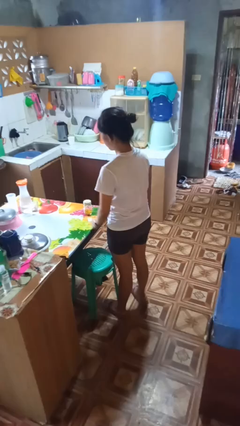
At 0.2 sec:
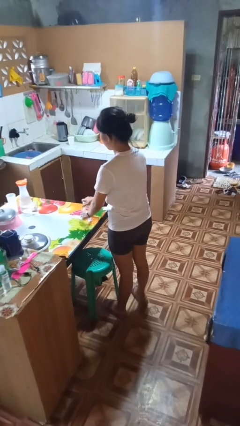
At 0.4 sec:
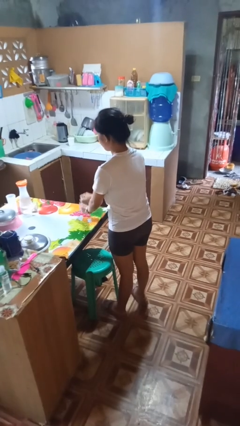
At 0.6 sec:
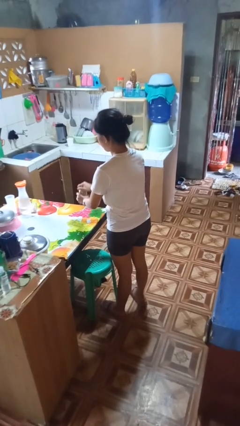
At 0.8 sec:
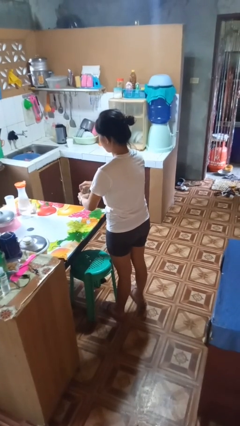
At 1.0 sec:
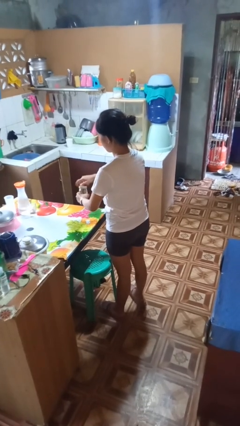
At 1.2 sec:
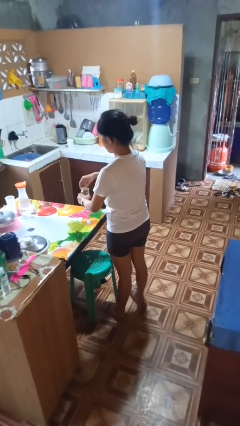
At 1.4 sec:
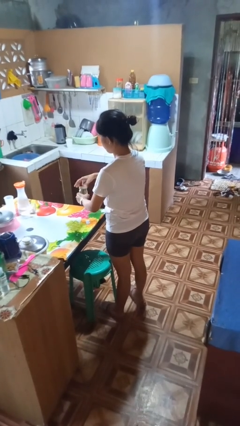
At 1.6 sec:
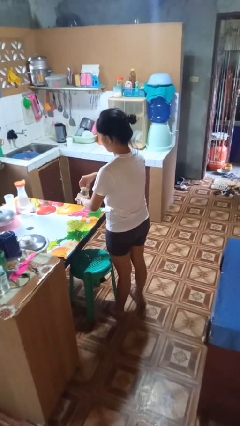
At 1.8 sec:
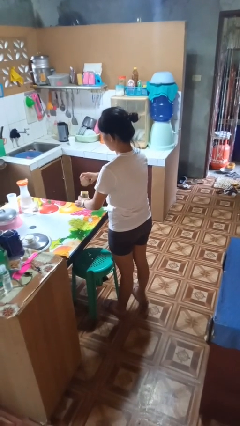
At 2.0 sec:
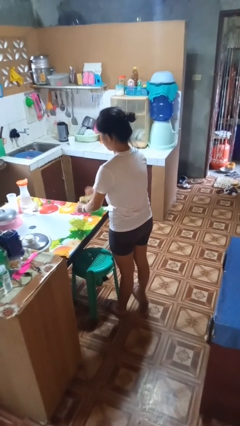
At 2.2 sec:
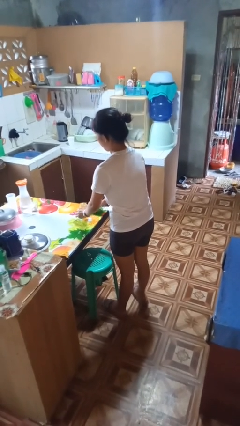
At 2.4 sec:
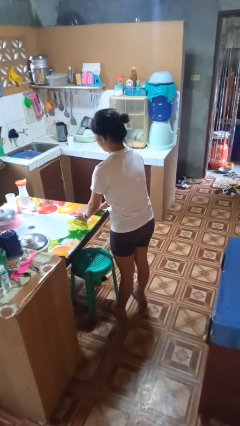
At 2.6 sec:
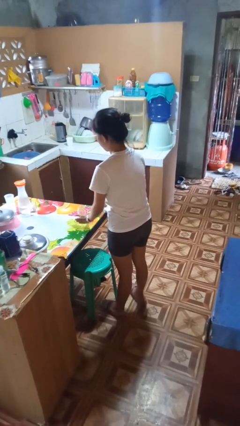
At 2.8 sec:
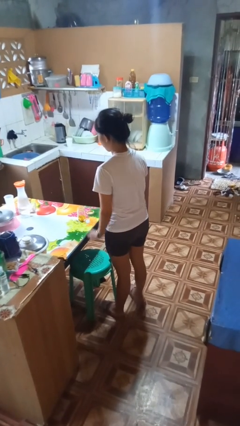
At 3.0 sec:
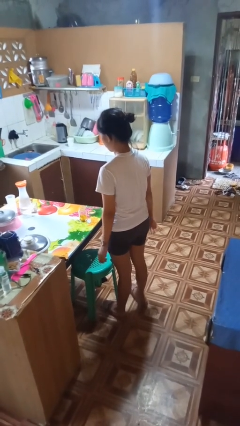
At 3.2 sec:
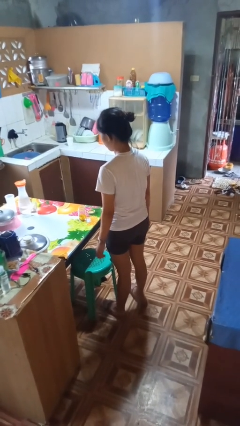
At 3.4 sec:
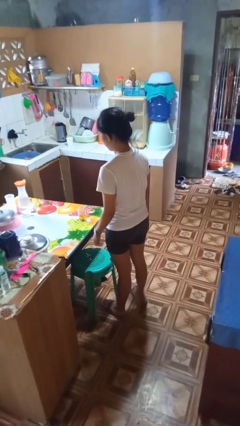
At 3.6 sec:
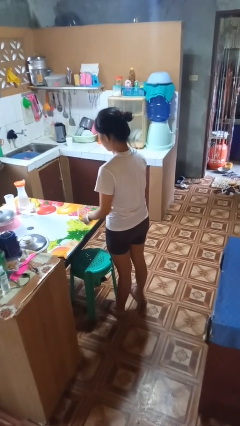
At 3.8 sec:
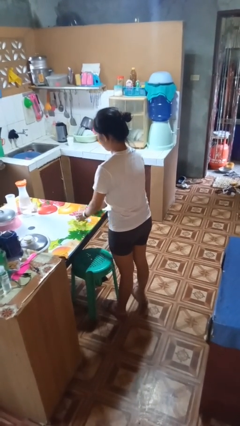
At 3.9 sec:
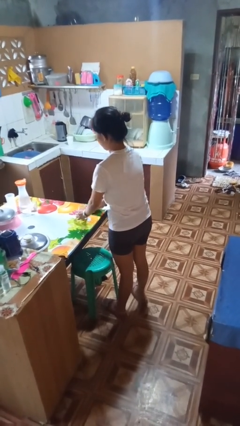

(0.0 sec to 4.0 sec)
person opens jar

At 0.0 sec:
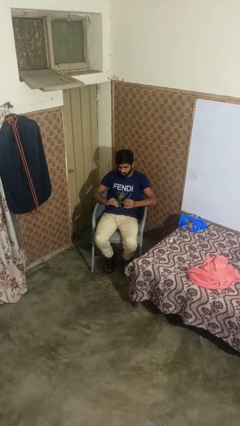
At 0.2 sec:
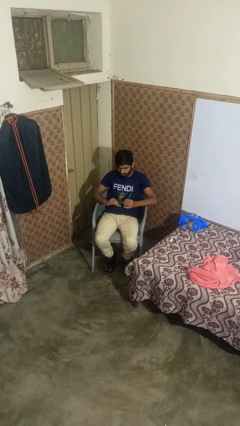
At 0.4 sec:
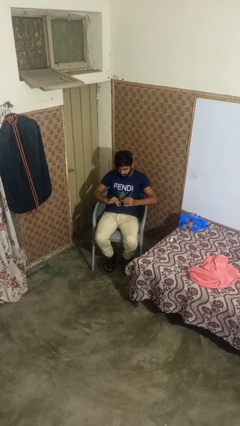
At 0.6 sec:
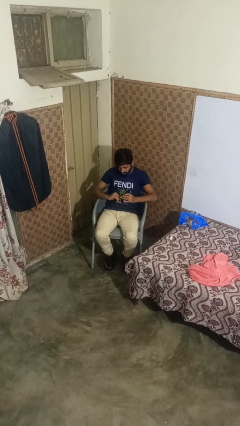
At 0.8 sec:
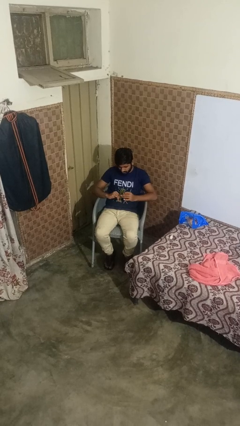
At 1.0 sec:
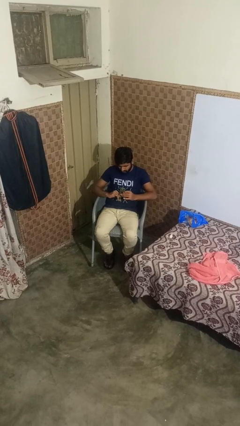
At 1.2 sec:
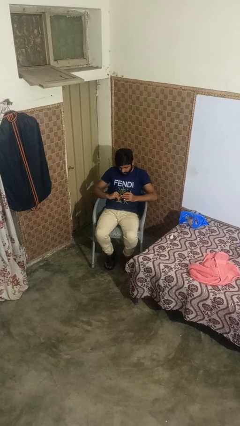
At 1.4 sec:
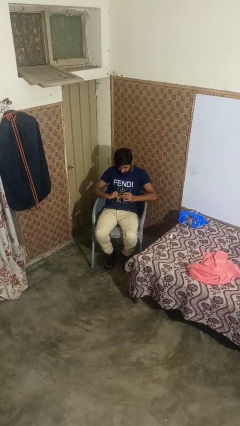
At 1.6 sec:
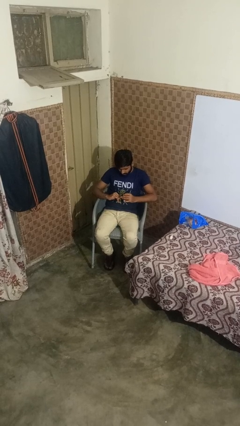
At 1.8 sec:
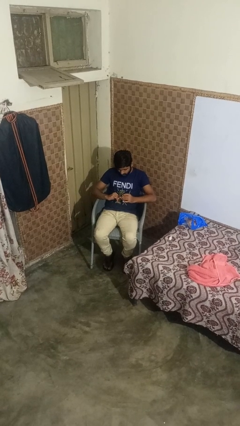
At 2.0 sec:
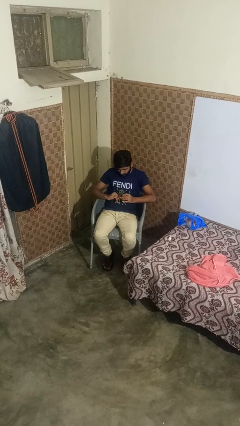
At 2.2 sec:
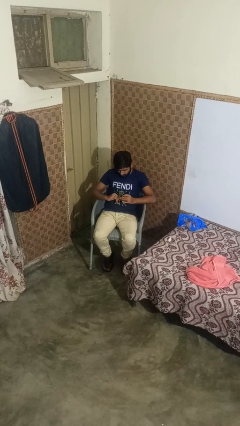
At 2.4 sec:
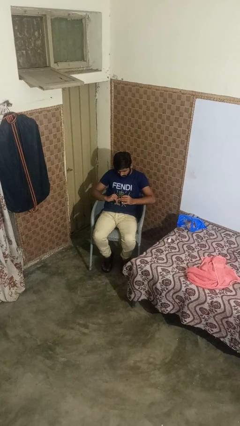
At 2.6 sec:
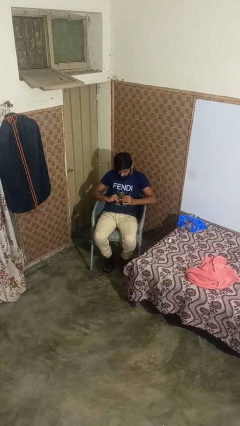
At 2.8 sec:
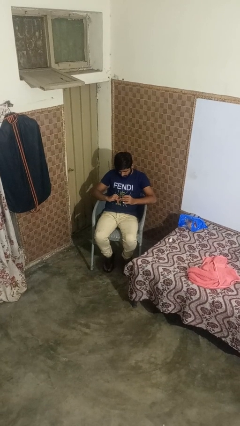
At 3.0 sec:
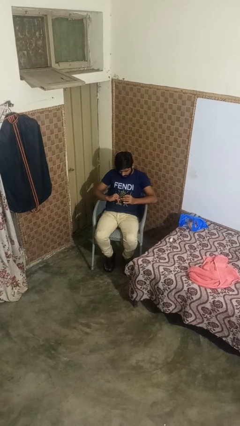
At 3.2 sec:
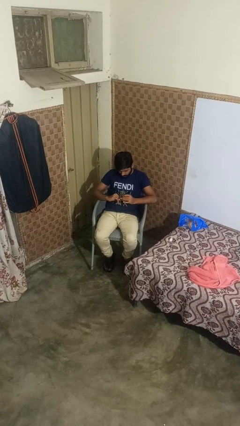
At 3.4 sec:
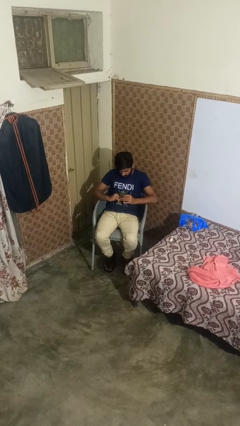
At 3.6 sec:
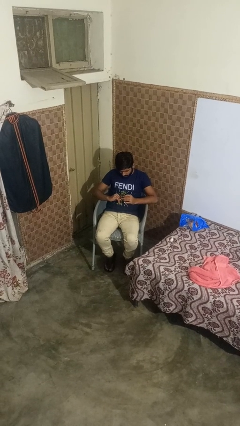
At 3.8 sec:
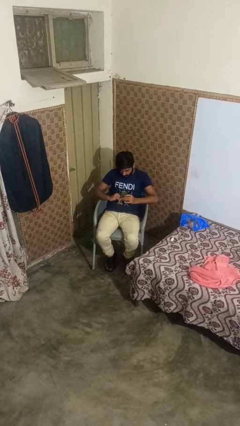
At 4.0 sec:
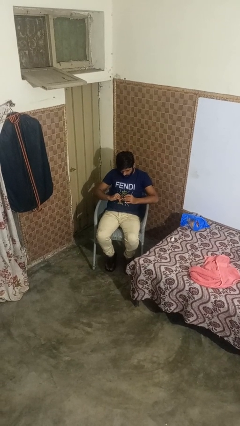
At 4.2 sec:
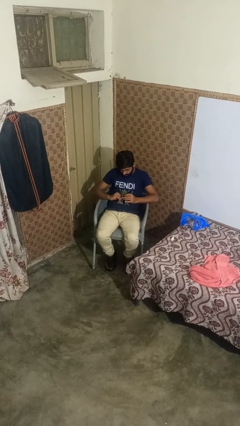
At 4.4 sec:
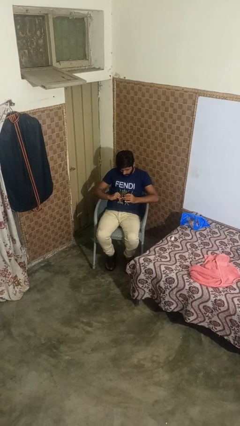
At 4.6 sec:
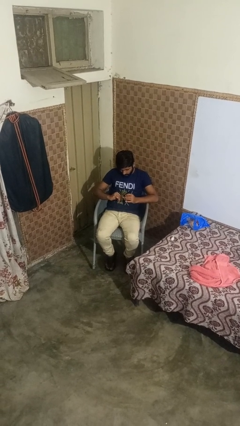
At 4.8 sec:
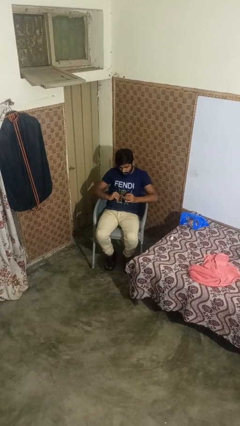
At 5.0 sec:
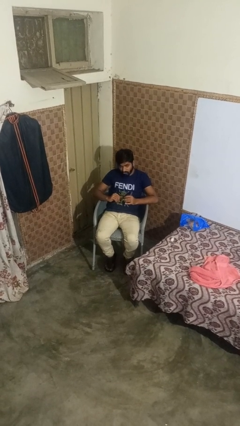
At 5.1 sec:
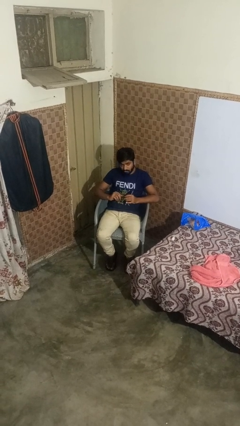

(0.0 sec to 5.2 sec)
person paints fingernails

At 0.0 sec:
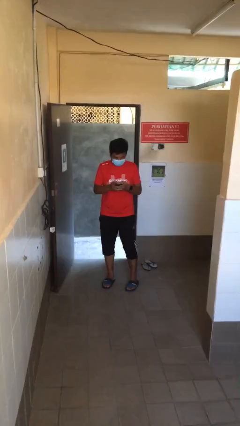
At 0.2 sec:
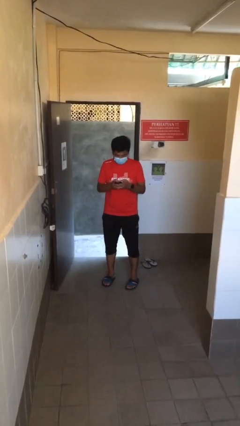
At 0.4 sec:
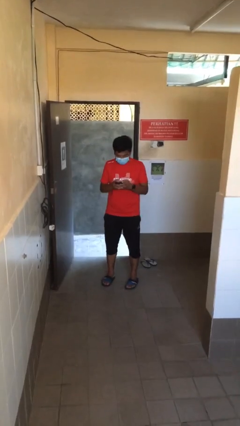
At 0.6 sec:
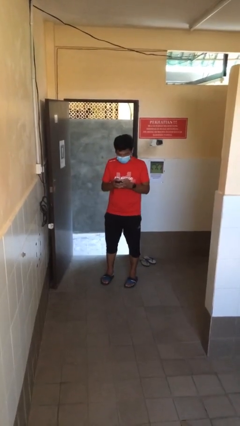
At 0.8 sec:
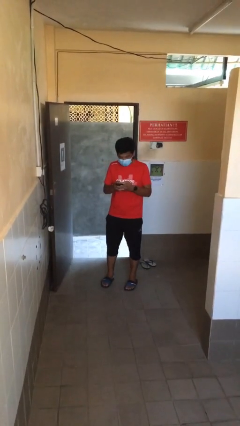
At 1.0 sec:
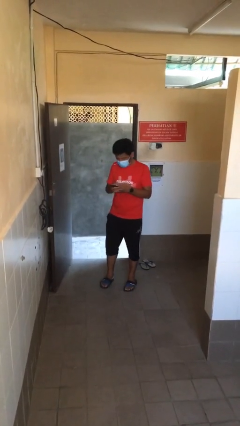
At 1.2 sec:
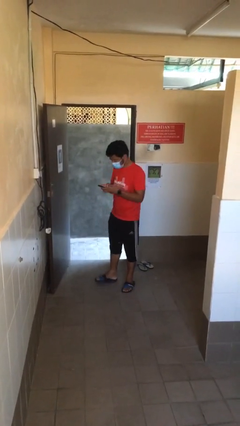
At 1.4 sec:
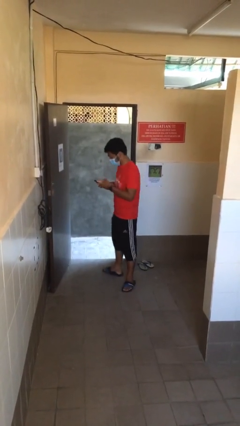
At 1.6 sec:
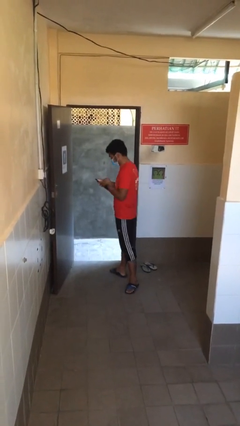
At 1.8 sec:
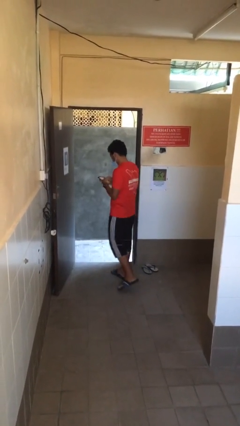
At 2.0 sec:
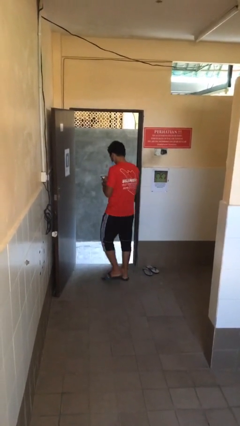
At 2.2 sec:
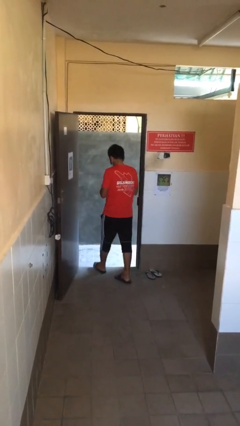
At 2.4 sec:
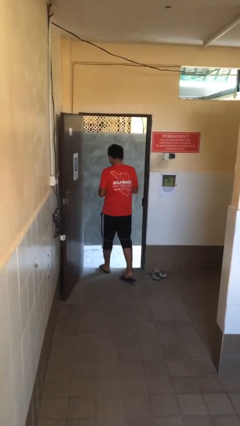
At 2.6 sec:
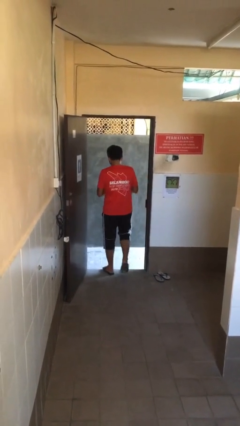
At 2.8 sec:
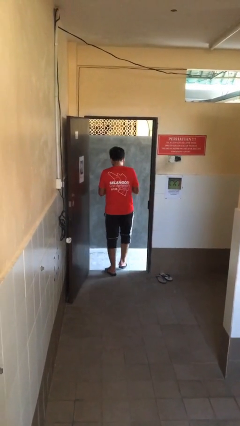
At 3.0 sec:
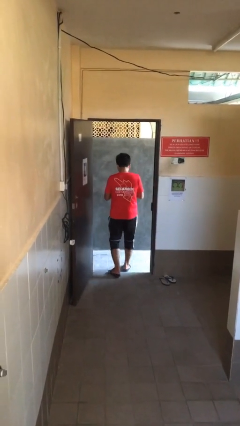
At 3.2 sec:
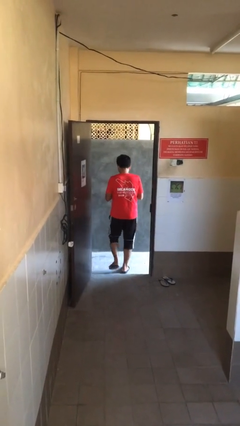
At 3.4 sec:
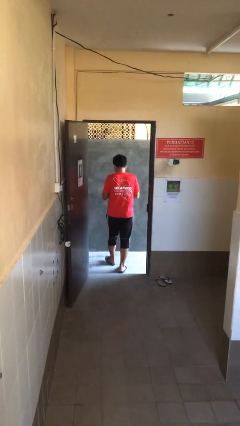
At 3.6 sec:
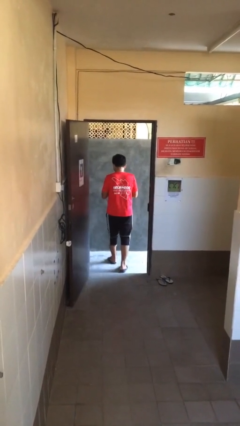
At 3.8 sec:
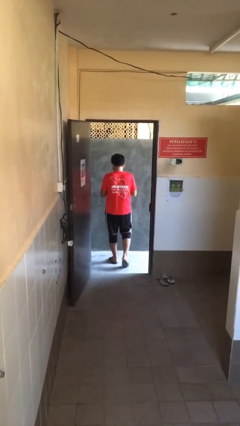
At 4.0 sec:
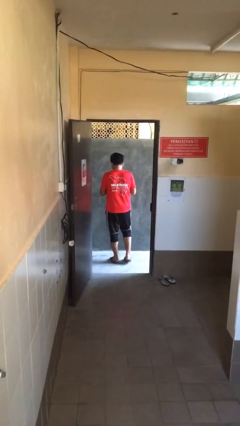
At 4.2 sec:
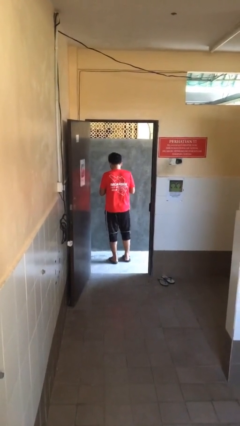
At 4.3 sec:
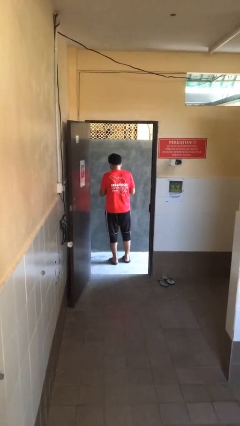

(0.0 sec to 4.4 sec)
person exits scene through structure

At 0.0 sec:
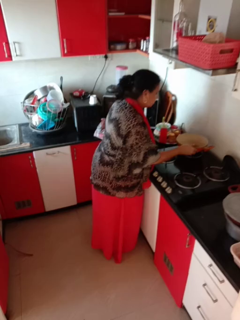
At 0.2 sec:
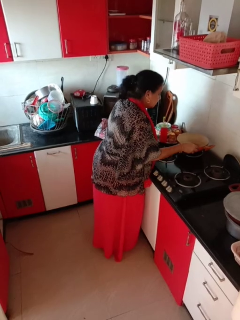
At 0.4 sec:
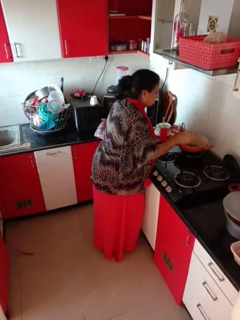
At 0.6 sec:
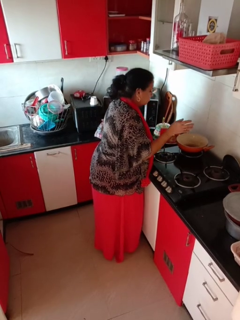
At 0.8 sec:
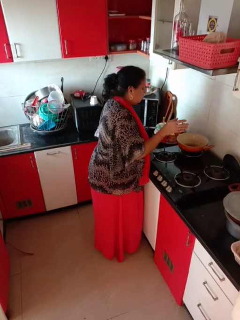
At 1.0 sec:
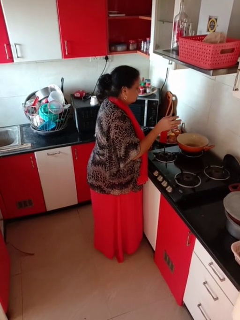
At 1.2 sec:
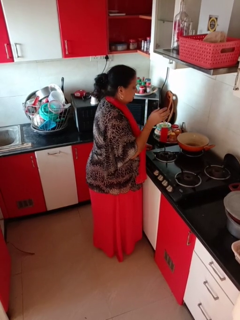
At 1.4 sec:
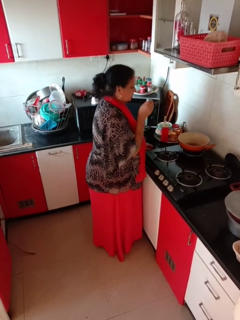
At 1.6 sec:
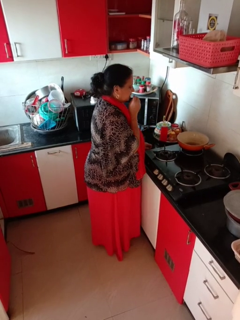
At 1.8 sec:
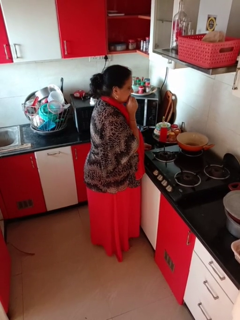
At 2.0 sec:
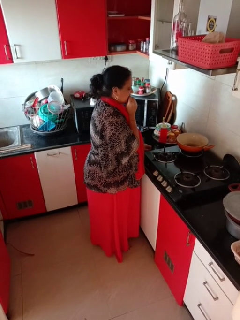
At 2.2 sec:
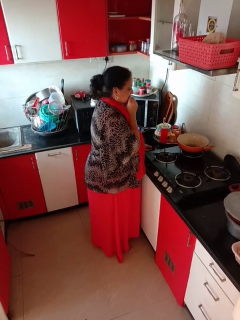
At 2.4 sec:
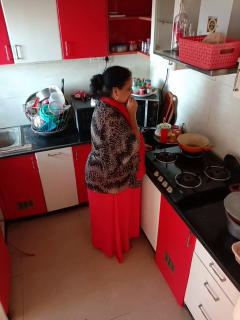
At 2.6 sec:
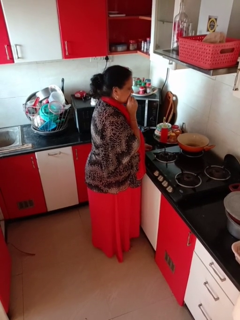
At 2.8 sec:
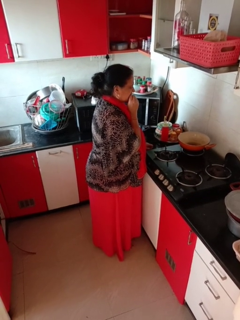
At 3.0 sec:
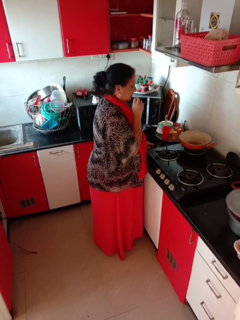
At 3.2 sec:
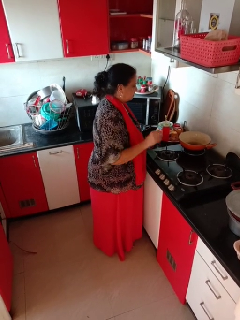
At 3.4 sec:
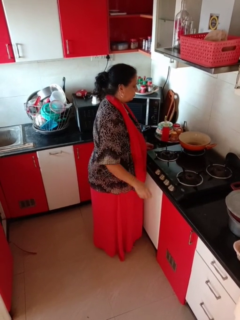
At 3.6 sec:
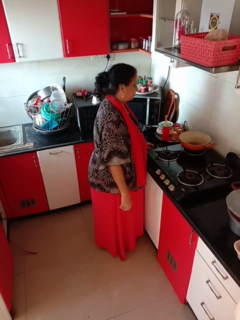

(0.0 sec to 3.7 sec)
person burns hand

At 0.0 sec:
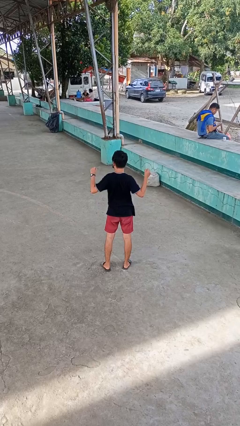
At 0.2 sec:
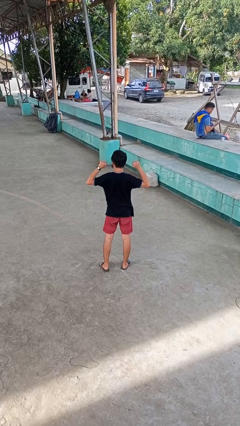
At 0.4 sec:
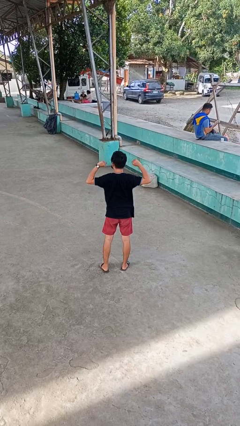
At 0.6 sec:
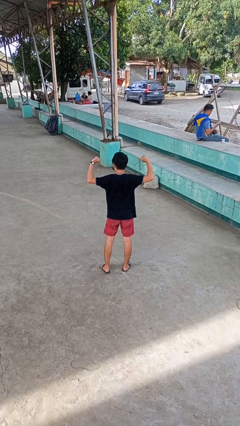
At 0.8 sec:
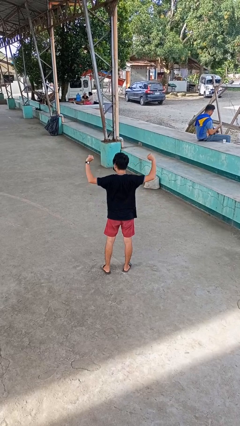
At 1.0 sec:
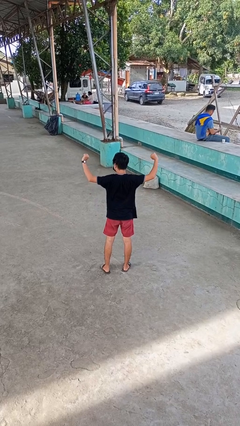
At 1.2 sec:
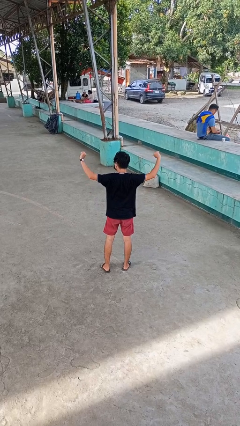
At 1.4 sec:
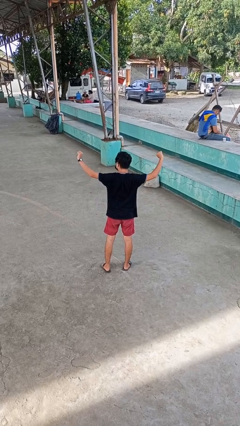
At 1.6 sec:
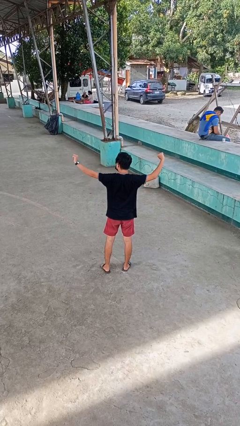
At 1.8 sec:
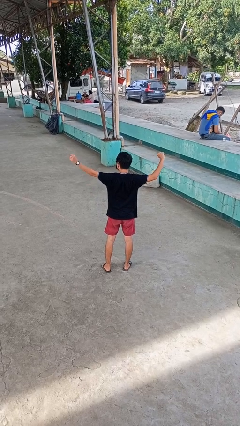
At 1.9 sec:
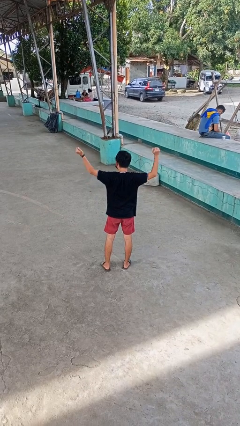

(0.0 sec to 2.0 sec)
person stretches arms to side
